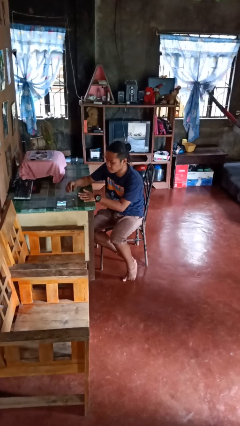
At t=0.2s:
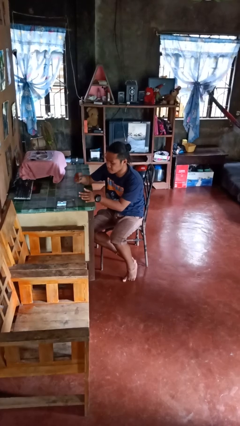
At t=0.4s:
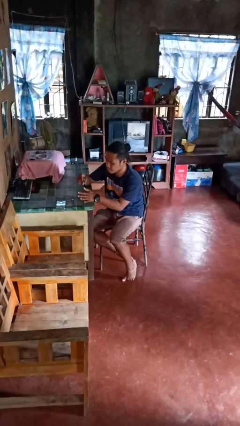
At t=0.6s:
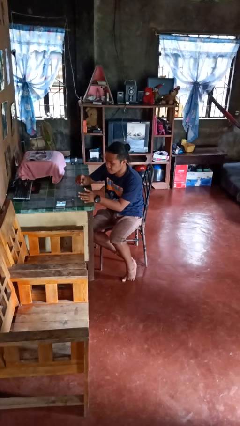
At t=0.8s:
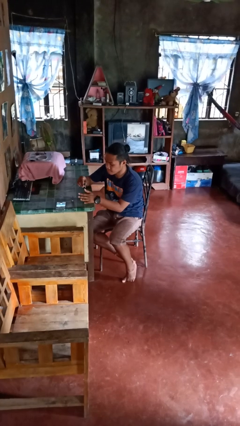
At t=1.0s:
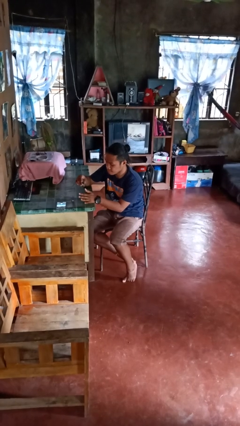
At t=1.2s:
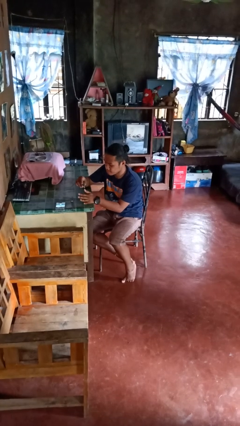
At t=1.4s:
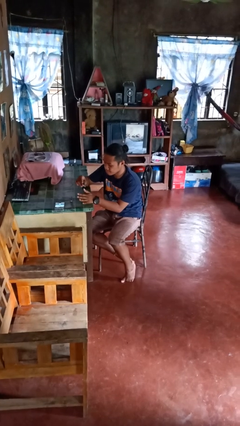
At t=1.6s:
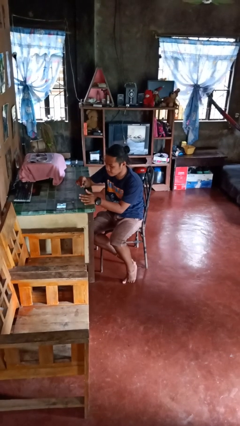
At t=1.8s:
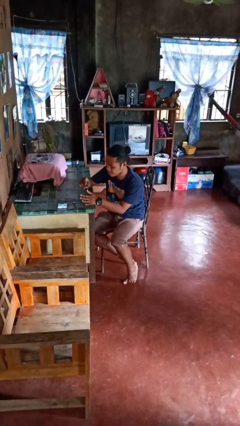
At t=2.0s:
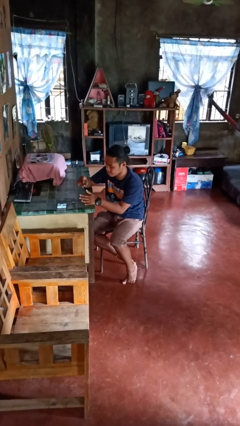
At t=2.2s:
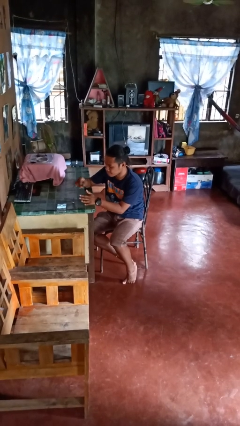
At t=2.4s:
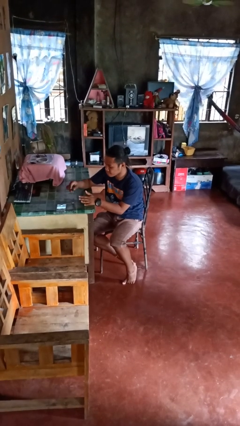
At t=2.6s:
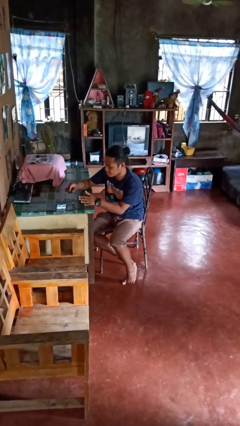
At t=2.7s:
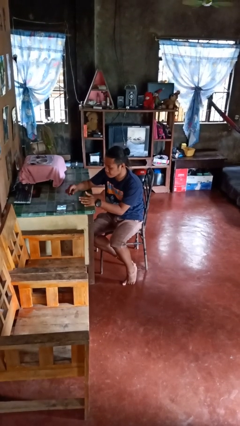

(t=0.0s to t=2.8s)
person paints fingernails

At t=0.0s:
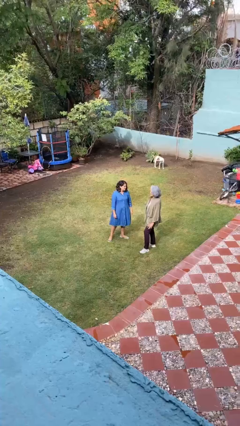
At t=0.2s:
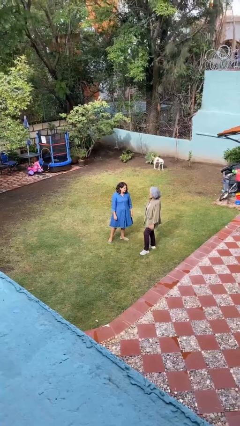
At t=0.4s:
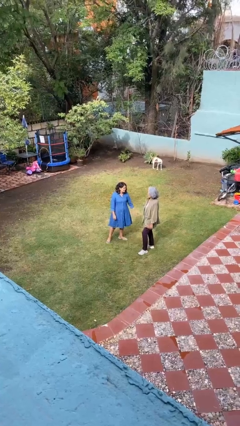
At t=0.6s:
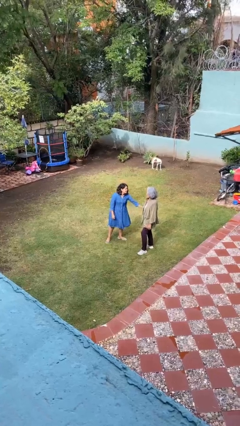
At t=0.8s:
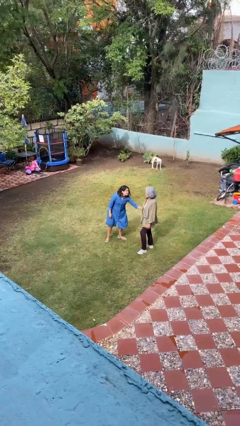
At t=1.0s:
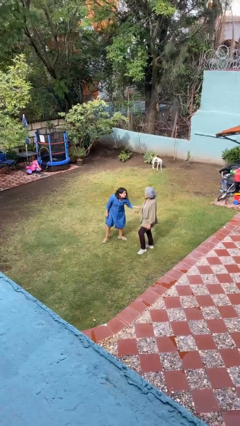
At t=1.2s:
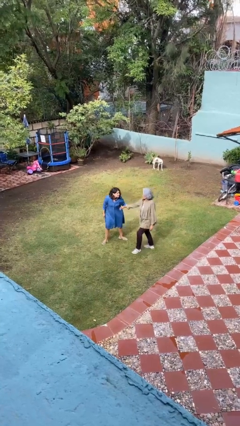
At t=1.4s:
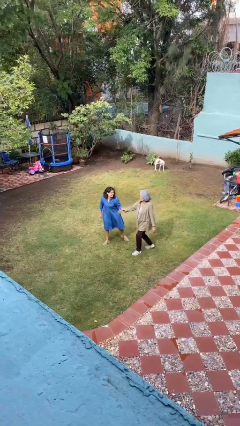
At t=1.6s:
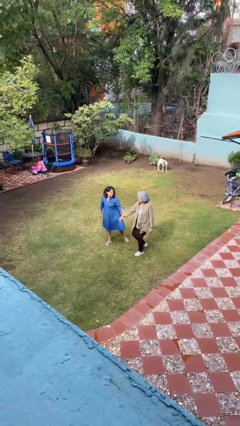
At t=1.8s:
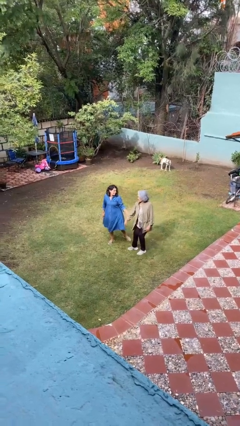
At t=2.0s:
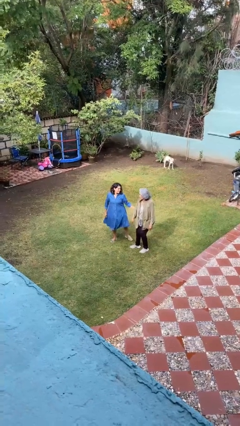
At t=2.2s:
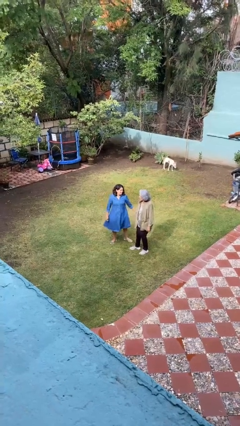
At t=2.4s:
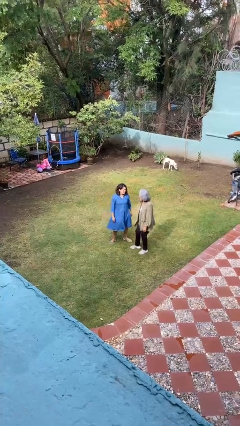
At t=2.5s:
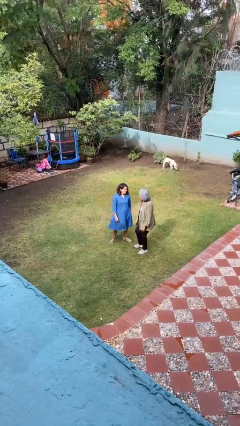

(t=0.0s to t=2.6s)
person grabs person by forearm

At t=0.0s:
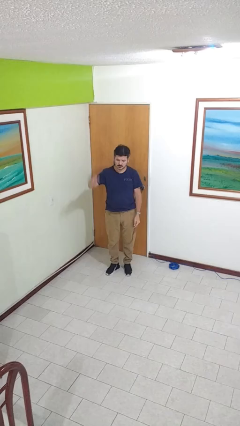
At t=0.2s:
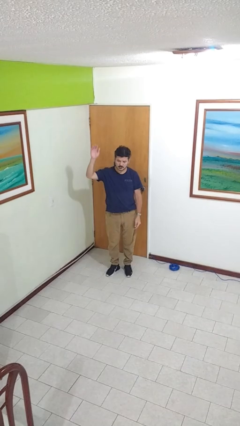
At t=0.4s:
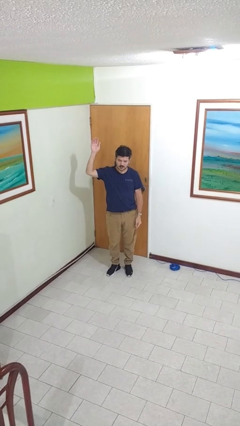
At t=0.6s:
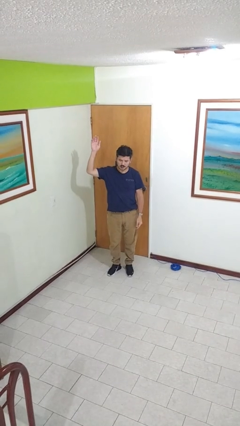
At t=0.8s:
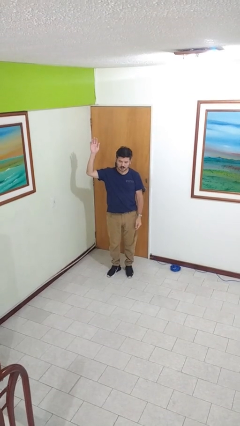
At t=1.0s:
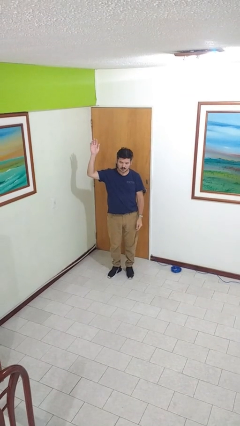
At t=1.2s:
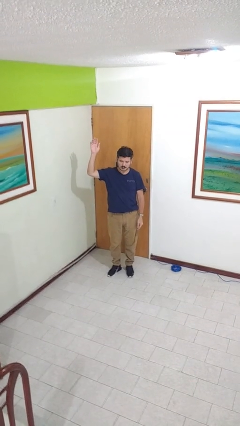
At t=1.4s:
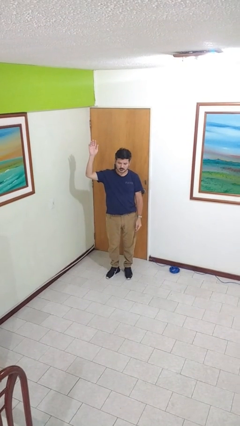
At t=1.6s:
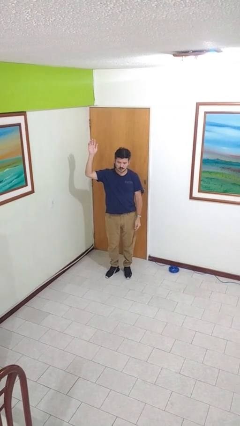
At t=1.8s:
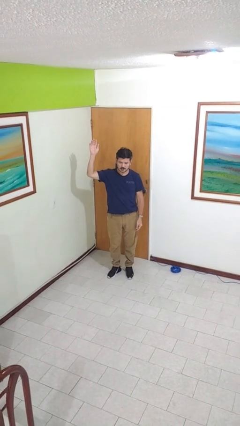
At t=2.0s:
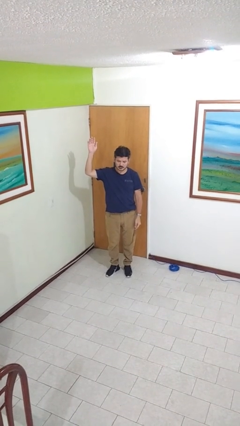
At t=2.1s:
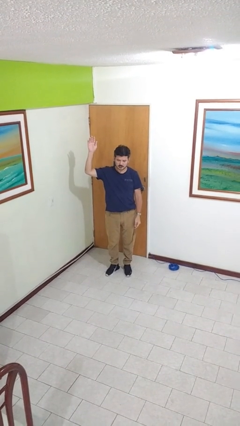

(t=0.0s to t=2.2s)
person gestures raise hand

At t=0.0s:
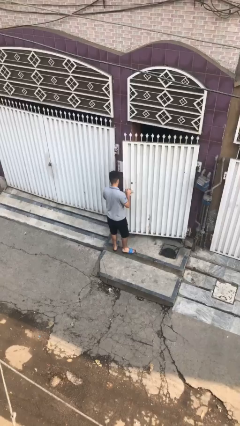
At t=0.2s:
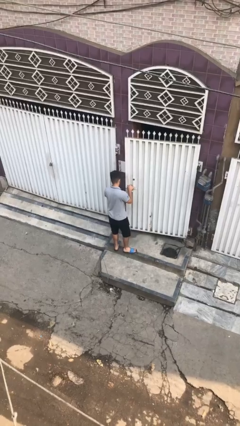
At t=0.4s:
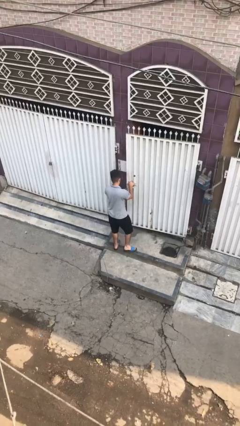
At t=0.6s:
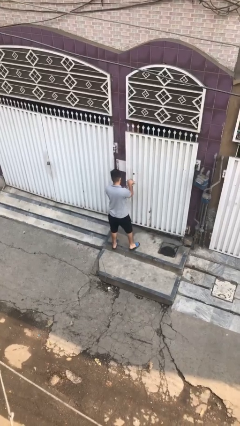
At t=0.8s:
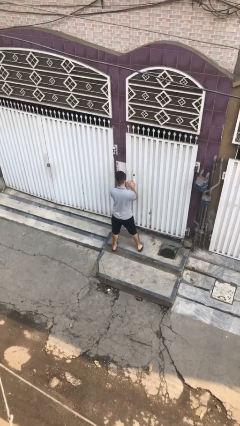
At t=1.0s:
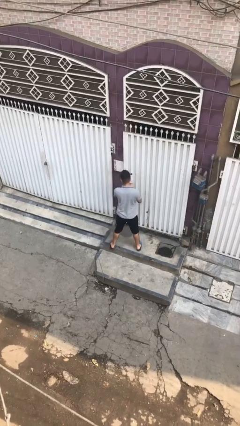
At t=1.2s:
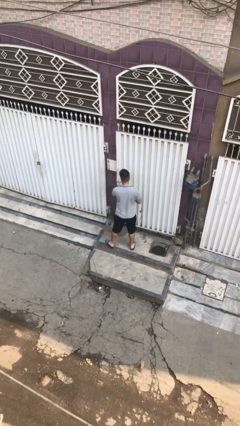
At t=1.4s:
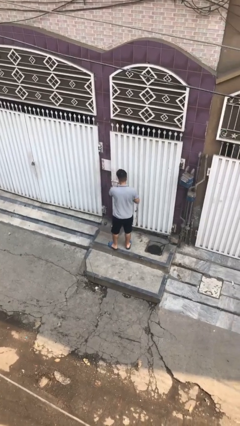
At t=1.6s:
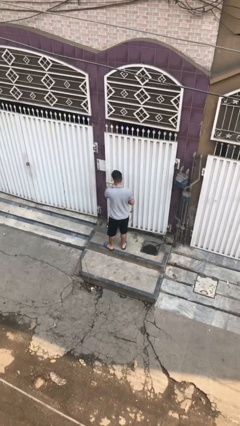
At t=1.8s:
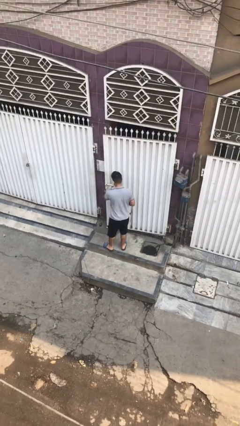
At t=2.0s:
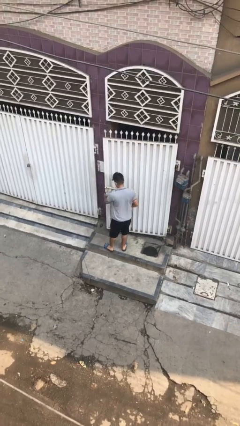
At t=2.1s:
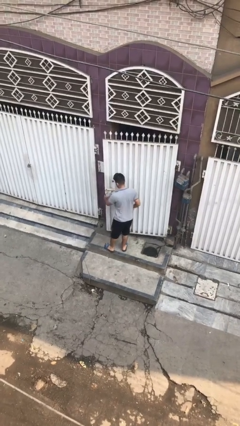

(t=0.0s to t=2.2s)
person closes facility door

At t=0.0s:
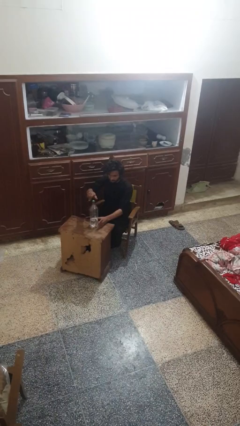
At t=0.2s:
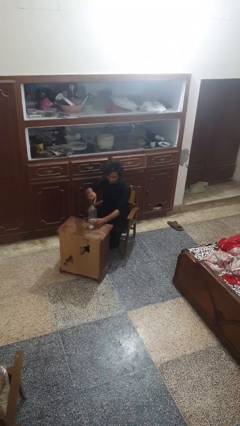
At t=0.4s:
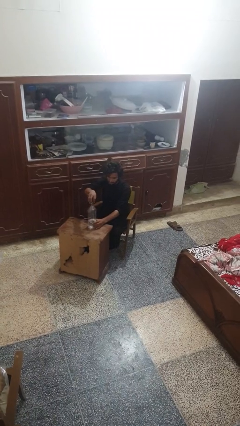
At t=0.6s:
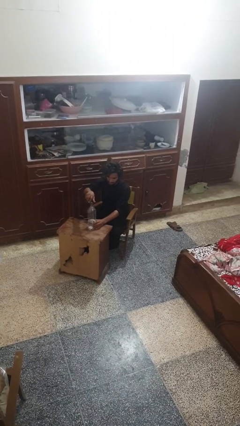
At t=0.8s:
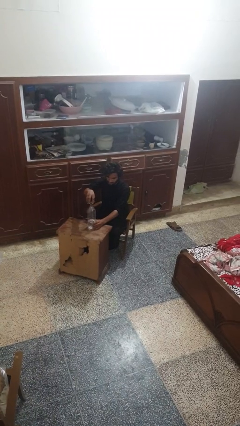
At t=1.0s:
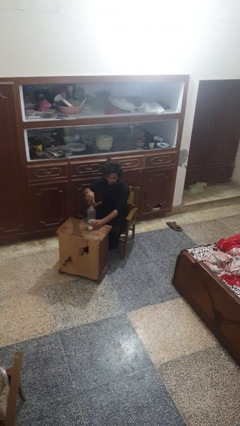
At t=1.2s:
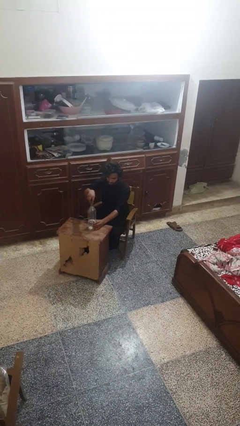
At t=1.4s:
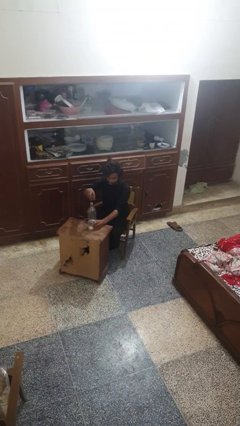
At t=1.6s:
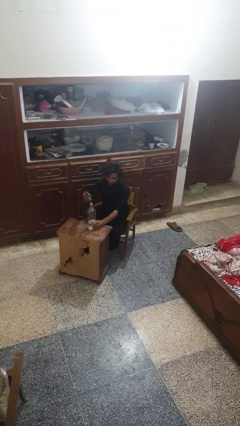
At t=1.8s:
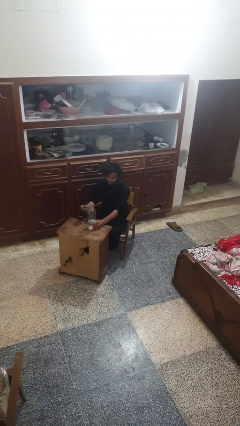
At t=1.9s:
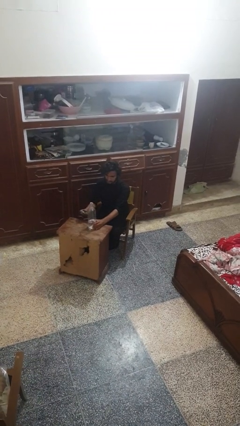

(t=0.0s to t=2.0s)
person unscrews lid from bottle

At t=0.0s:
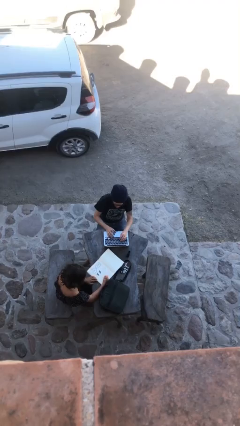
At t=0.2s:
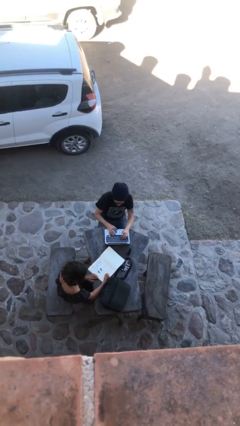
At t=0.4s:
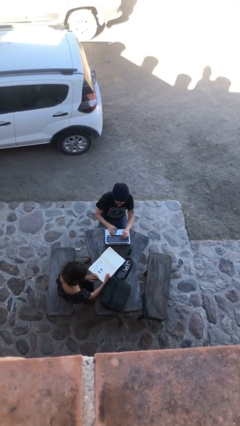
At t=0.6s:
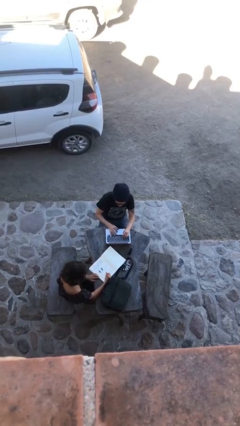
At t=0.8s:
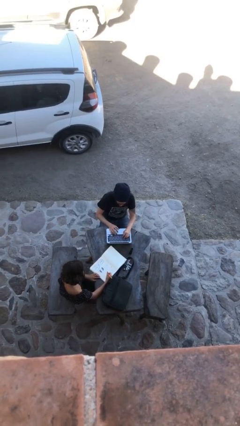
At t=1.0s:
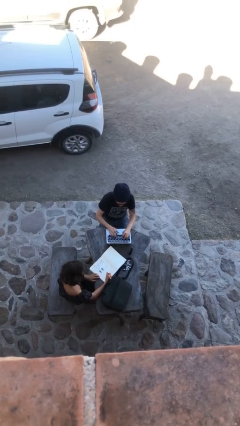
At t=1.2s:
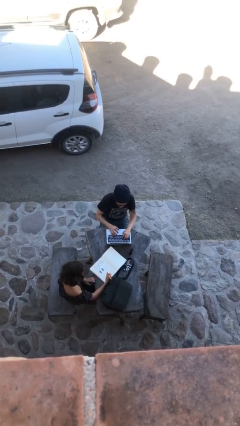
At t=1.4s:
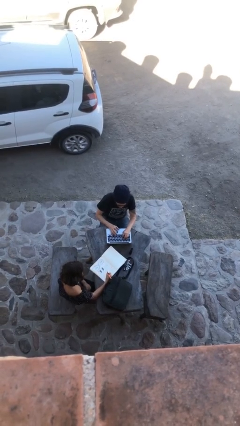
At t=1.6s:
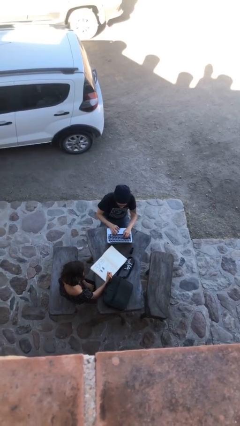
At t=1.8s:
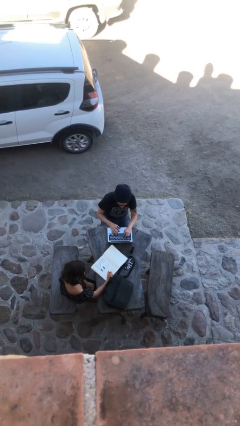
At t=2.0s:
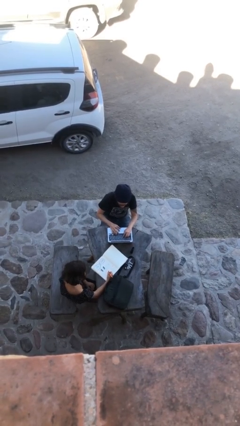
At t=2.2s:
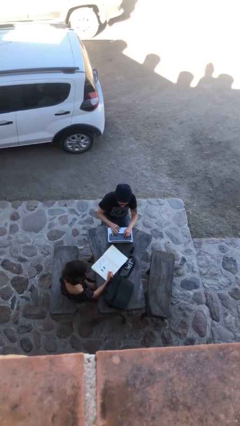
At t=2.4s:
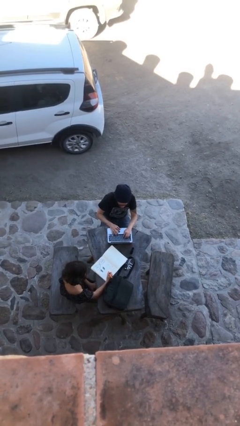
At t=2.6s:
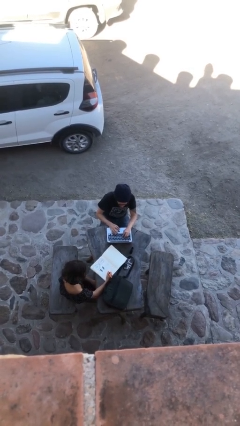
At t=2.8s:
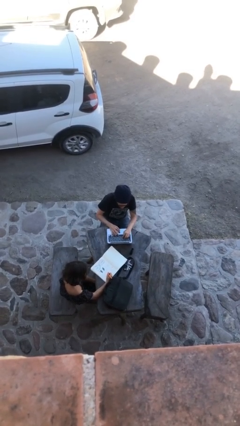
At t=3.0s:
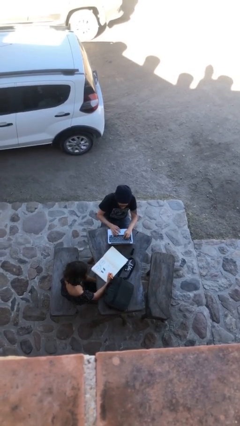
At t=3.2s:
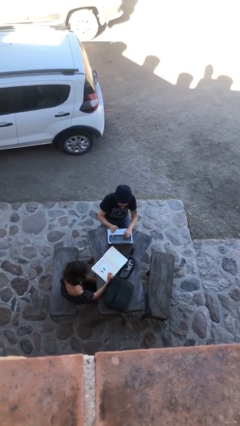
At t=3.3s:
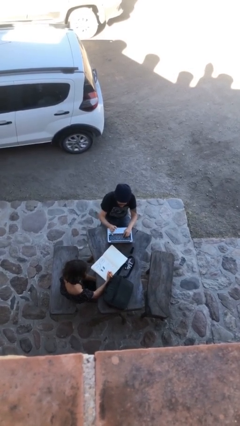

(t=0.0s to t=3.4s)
person interacts with laptop

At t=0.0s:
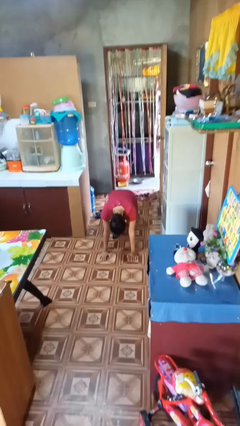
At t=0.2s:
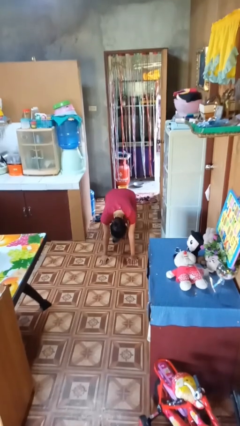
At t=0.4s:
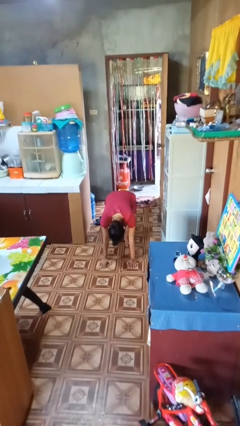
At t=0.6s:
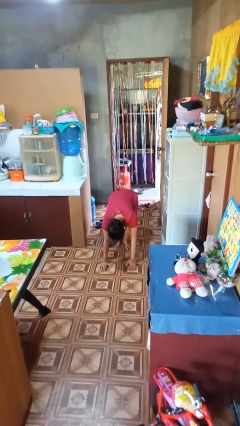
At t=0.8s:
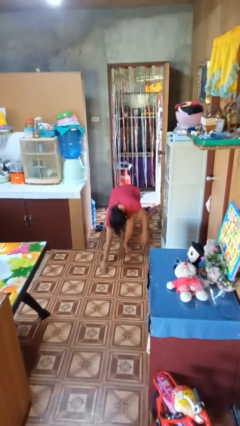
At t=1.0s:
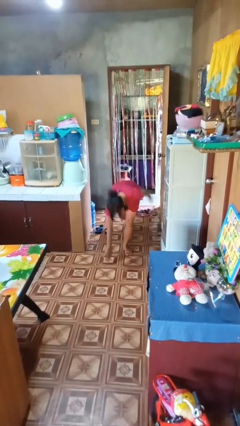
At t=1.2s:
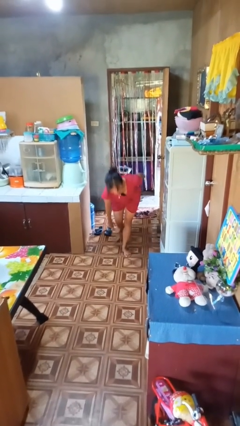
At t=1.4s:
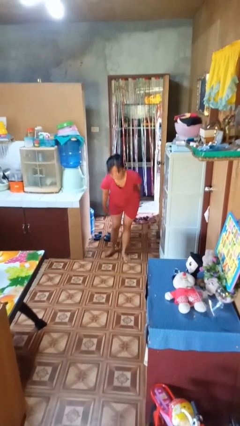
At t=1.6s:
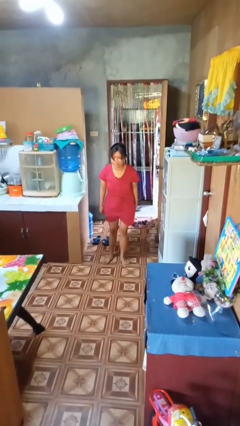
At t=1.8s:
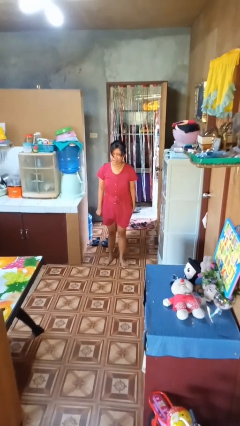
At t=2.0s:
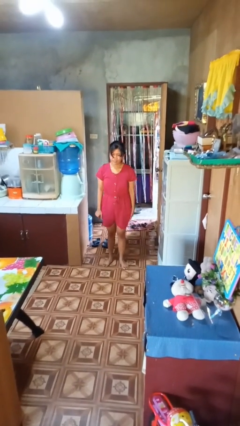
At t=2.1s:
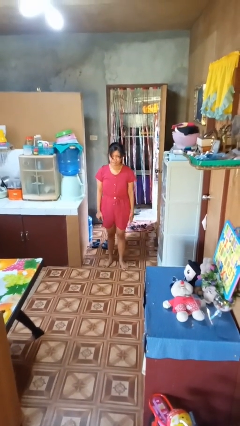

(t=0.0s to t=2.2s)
person stands up from floor
